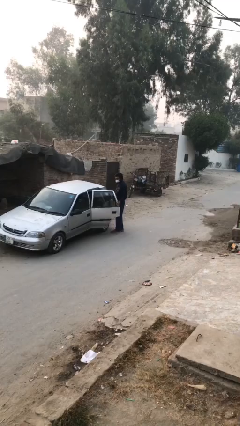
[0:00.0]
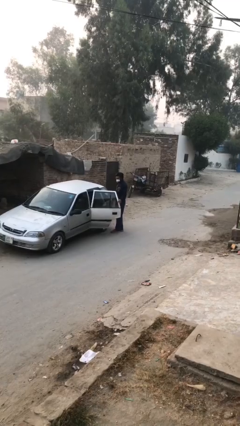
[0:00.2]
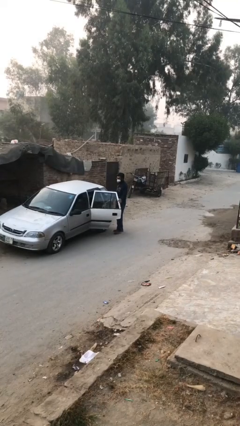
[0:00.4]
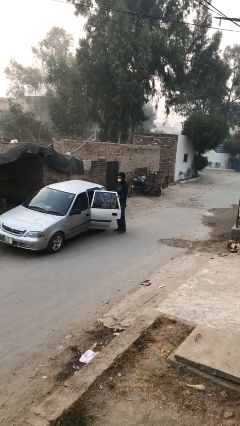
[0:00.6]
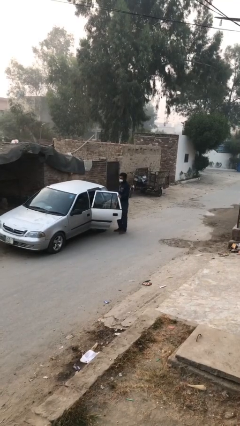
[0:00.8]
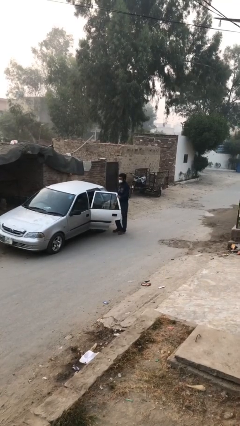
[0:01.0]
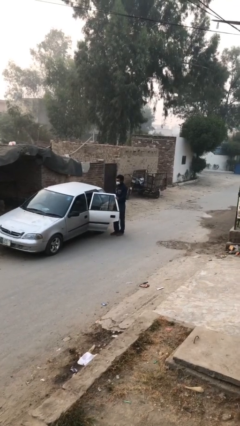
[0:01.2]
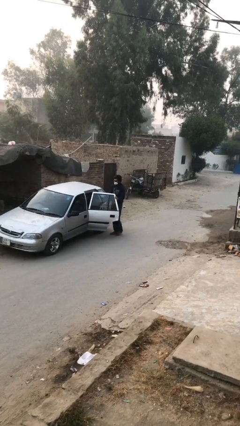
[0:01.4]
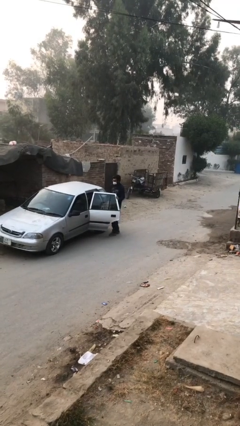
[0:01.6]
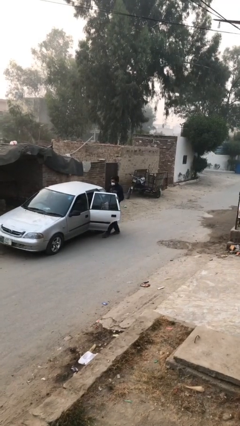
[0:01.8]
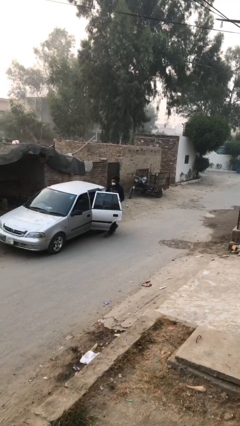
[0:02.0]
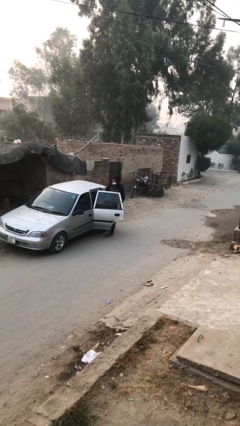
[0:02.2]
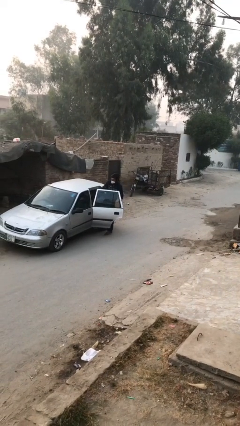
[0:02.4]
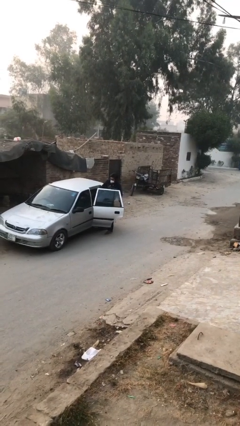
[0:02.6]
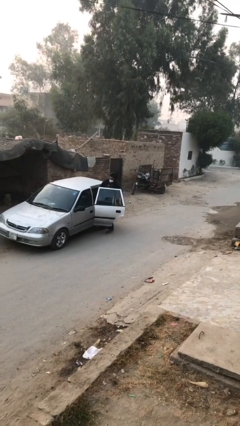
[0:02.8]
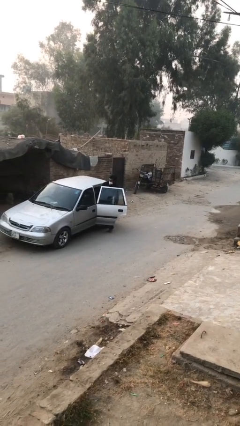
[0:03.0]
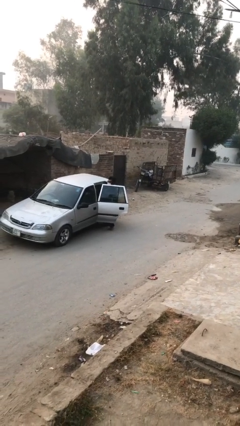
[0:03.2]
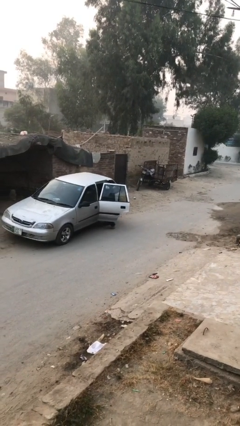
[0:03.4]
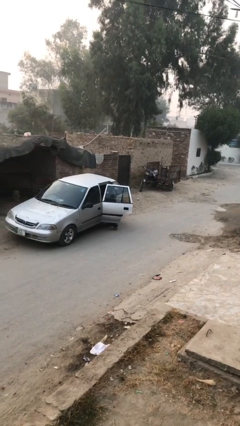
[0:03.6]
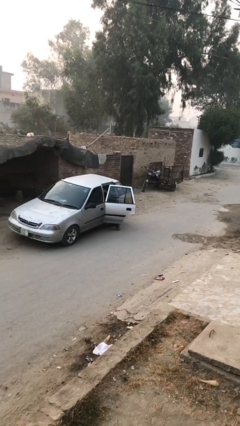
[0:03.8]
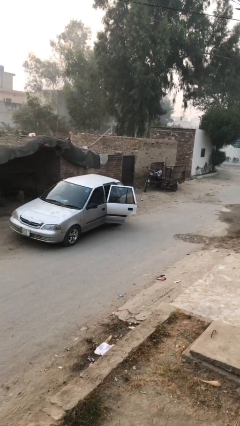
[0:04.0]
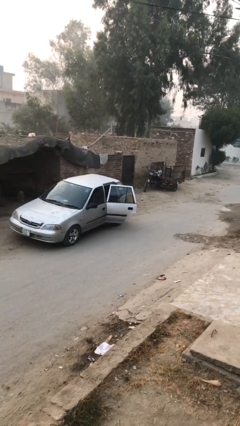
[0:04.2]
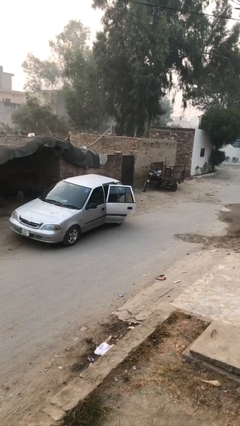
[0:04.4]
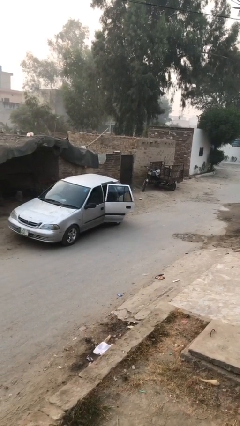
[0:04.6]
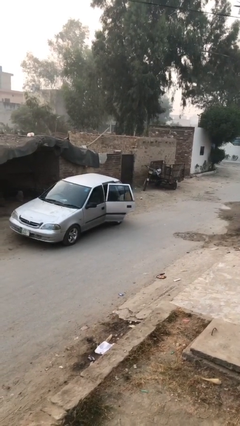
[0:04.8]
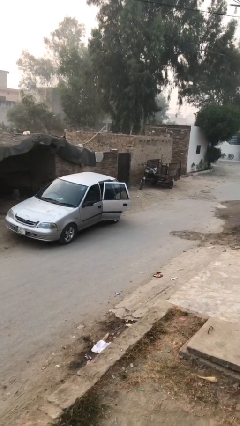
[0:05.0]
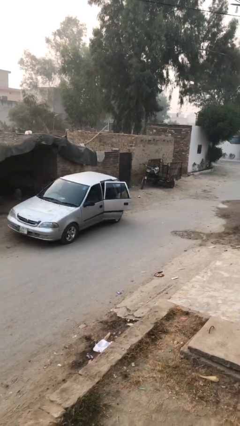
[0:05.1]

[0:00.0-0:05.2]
person enters car

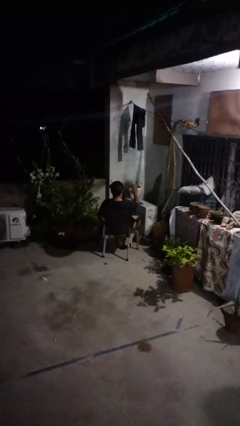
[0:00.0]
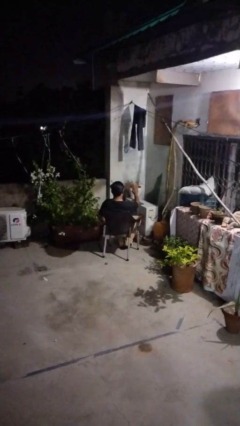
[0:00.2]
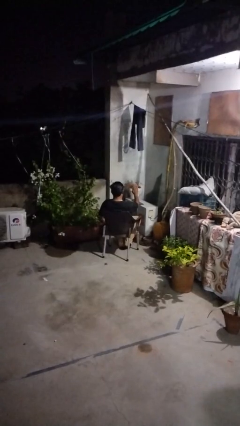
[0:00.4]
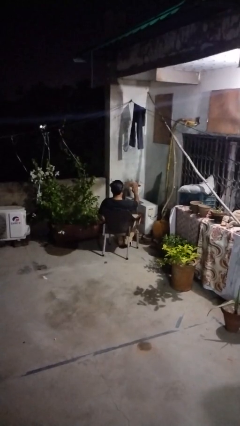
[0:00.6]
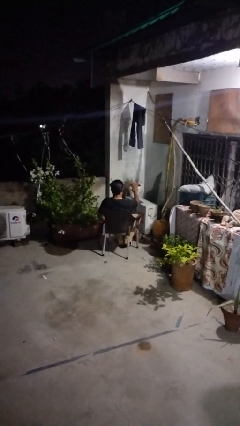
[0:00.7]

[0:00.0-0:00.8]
person gestures stop

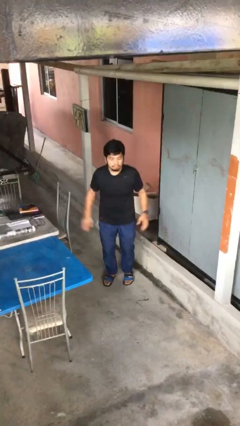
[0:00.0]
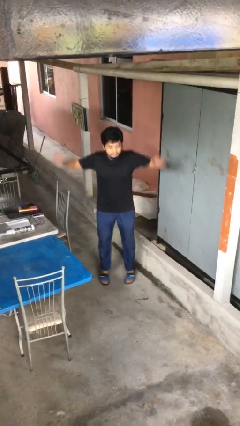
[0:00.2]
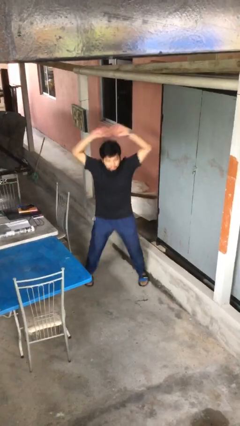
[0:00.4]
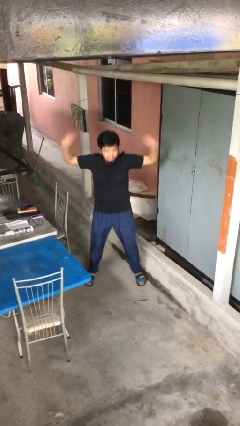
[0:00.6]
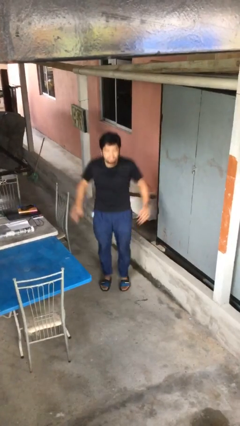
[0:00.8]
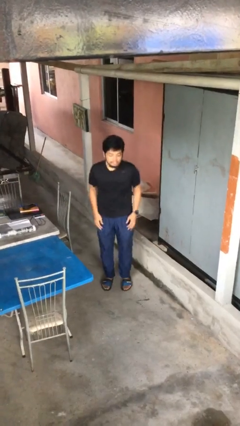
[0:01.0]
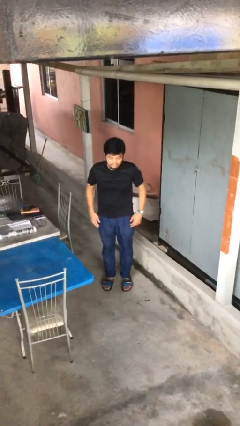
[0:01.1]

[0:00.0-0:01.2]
person exercises with jumping jacks

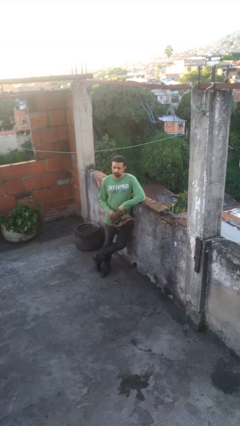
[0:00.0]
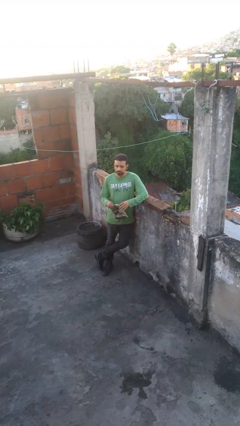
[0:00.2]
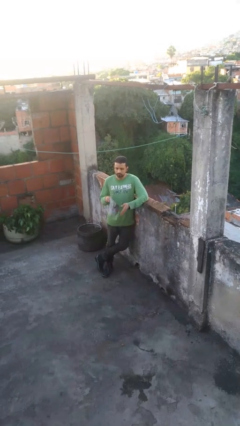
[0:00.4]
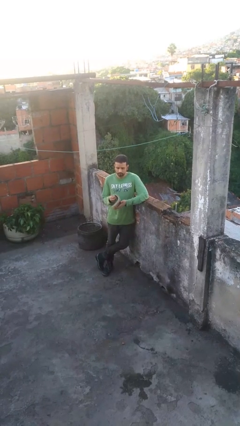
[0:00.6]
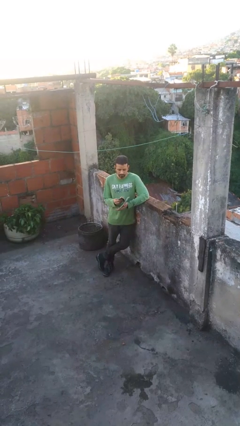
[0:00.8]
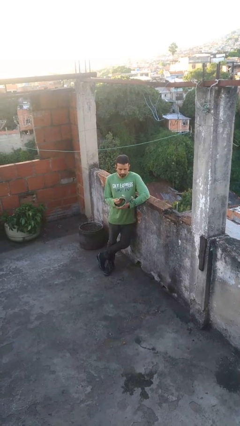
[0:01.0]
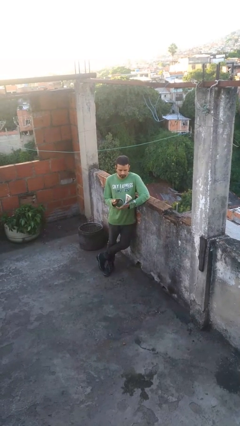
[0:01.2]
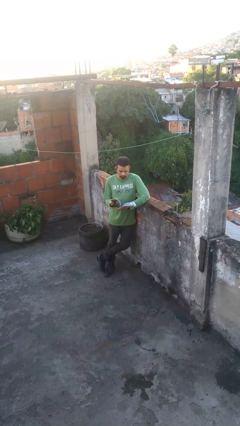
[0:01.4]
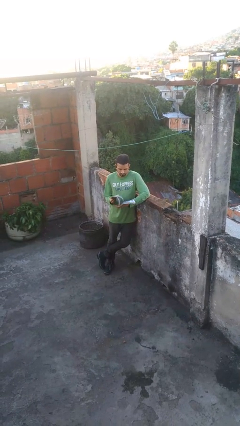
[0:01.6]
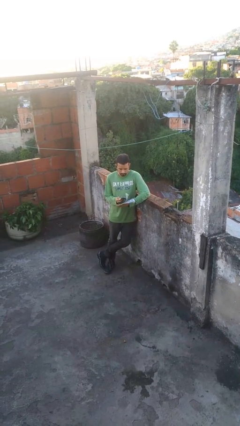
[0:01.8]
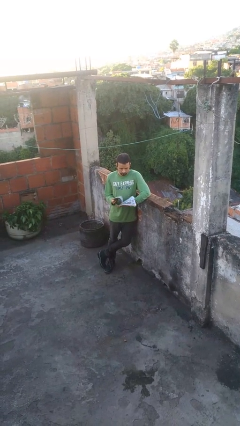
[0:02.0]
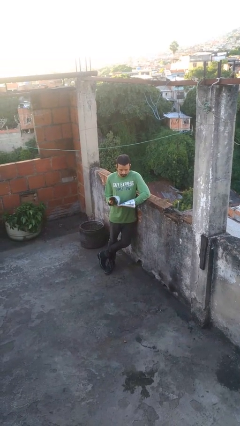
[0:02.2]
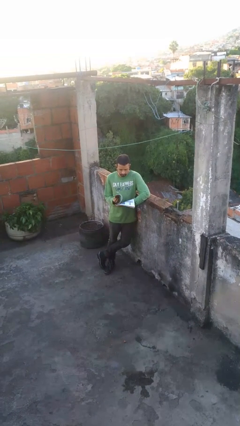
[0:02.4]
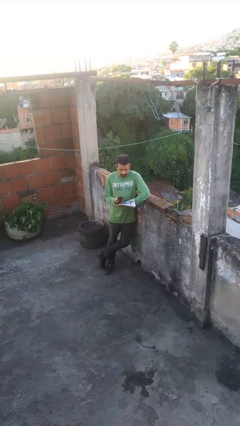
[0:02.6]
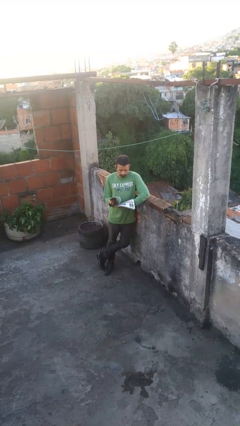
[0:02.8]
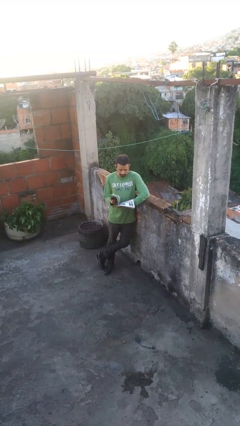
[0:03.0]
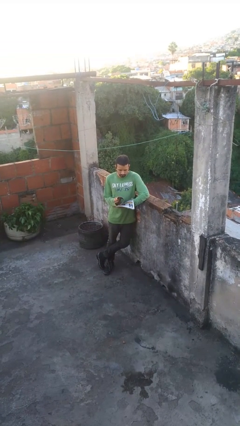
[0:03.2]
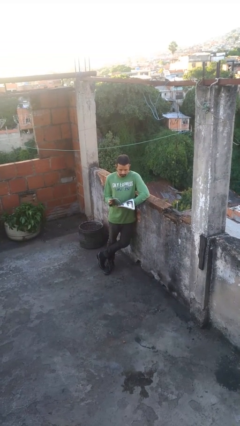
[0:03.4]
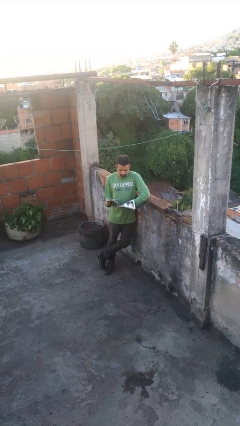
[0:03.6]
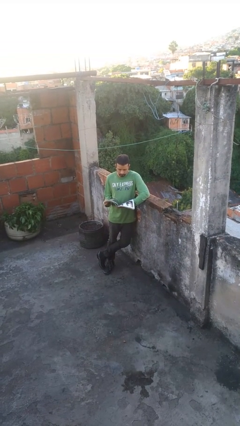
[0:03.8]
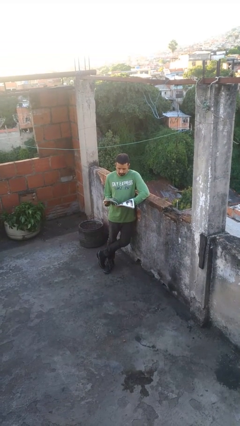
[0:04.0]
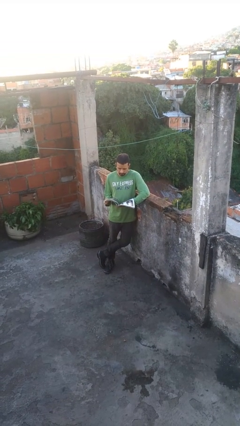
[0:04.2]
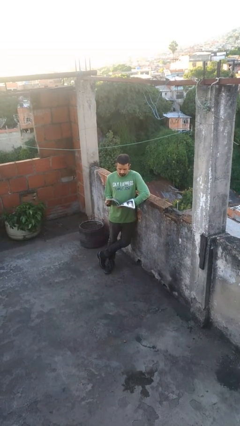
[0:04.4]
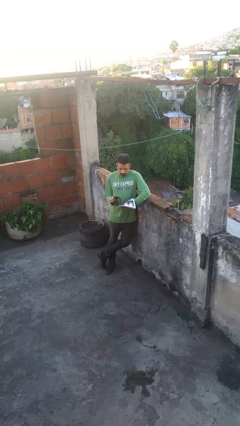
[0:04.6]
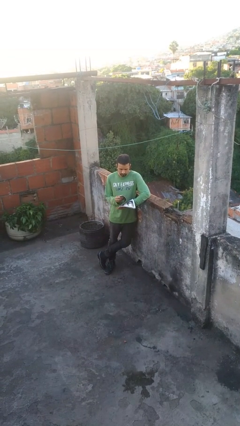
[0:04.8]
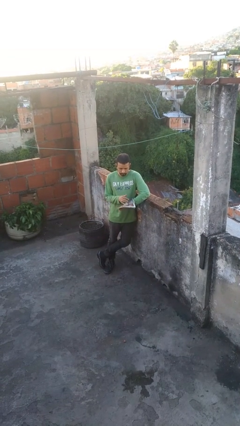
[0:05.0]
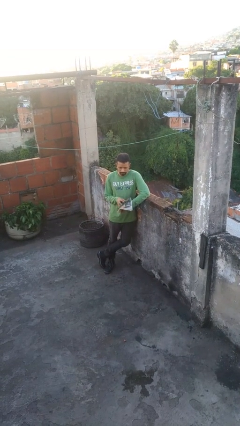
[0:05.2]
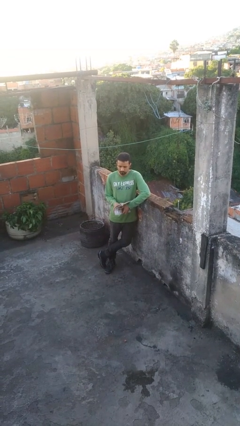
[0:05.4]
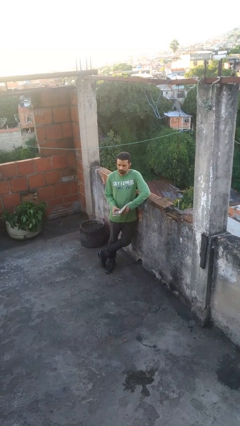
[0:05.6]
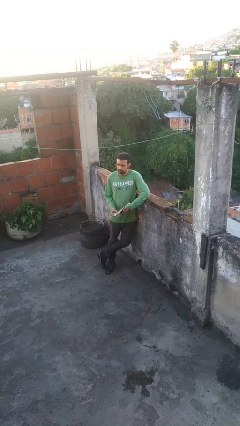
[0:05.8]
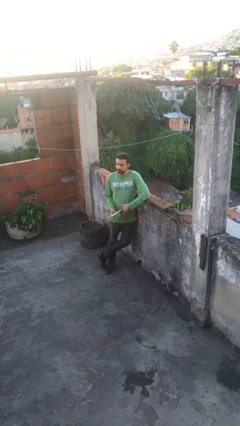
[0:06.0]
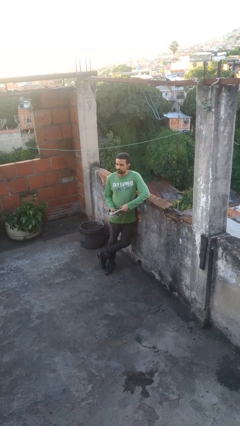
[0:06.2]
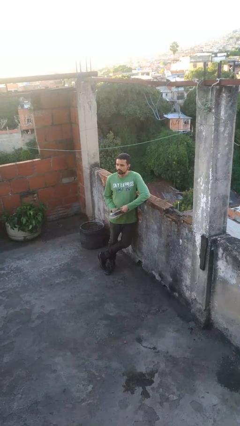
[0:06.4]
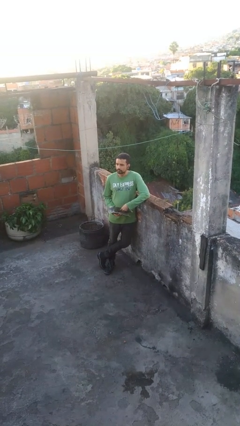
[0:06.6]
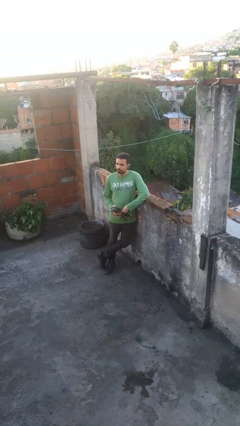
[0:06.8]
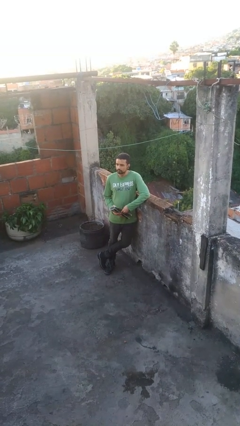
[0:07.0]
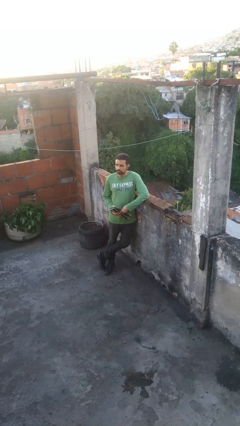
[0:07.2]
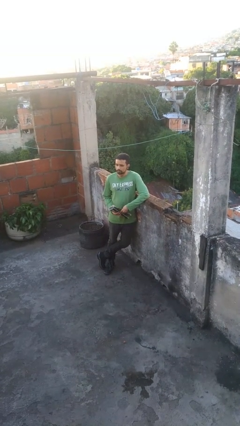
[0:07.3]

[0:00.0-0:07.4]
person reads magazine

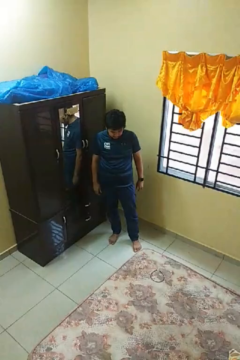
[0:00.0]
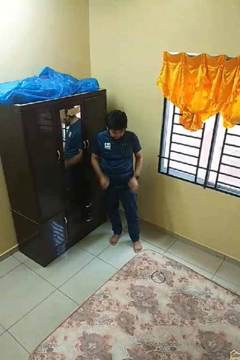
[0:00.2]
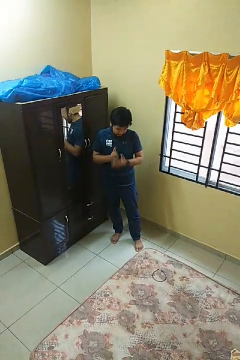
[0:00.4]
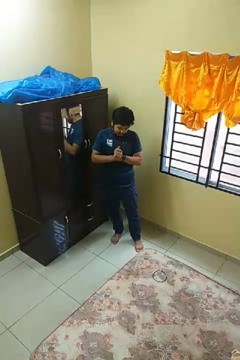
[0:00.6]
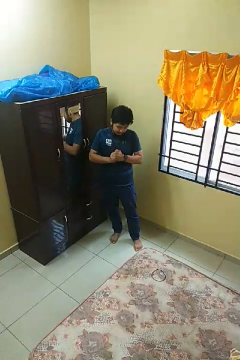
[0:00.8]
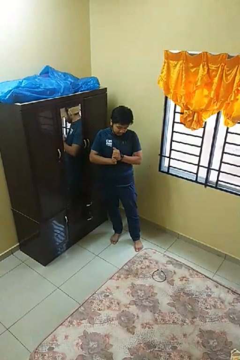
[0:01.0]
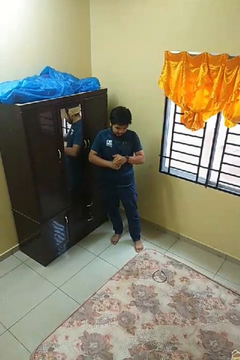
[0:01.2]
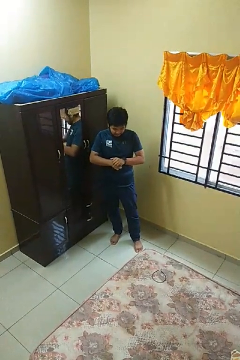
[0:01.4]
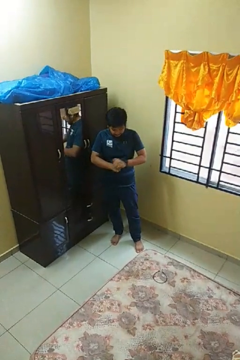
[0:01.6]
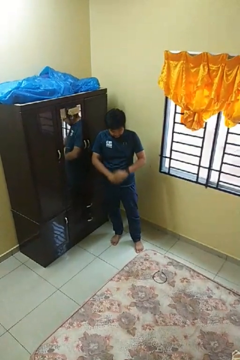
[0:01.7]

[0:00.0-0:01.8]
person cracks knuckles

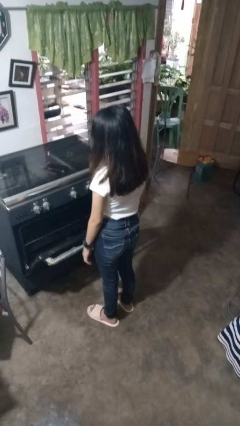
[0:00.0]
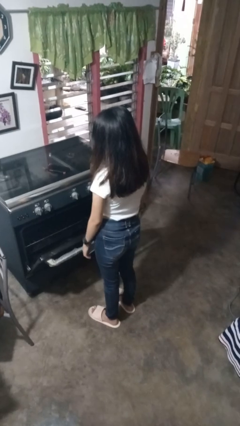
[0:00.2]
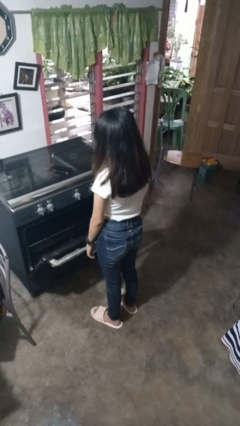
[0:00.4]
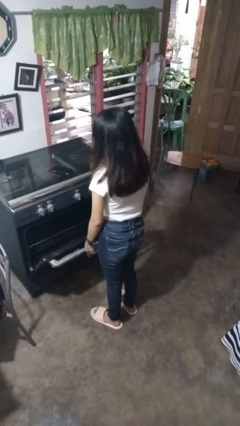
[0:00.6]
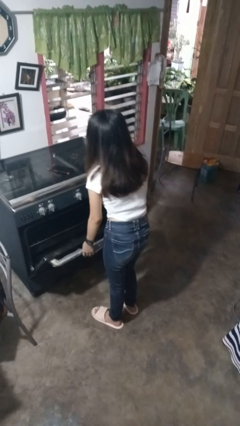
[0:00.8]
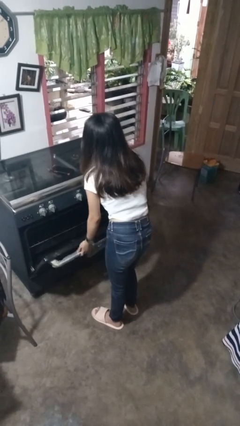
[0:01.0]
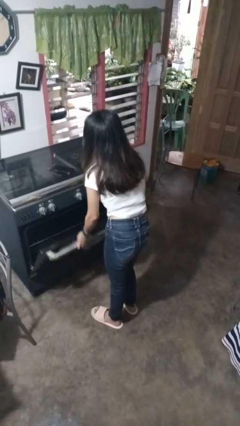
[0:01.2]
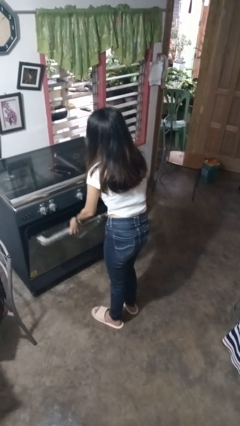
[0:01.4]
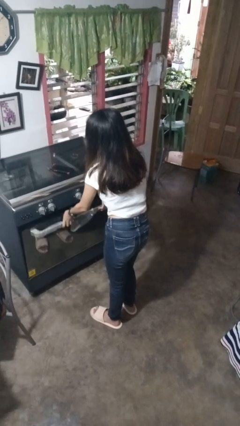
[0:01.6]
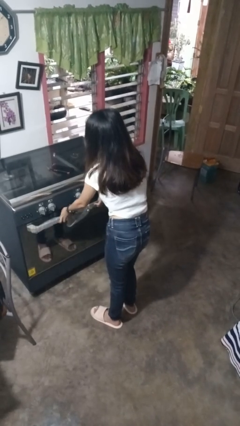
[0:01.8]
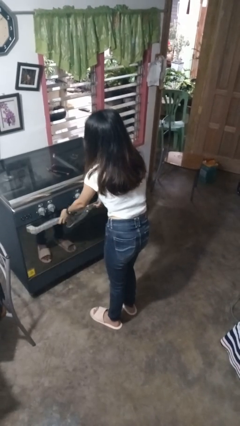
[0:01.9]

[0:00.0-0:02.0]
person closes oven door
